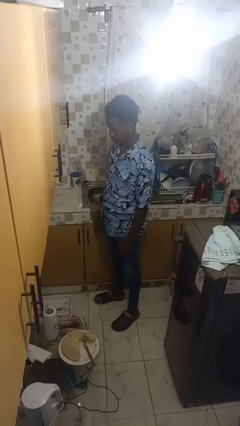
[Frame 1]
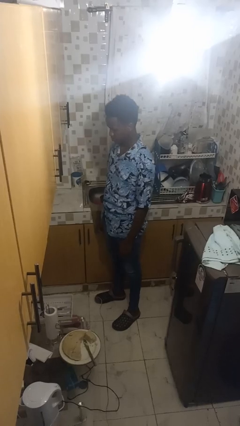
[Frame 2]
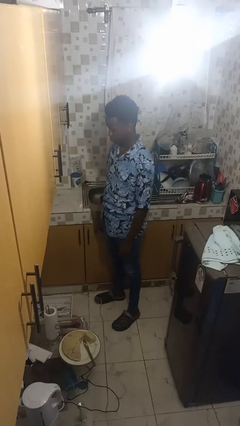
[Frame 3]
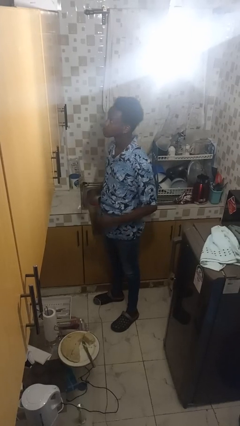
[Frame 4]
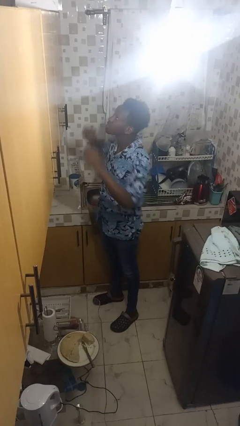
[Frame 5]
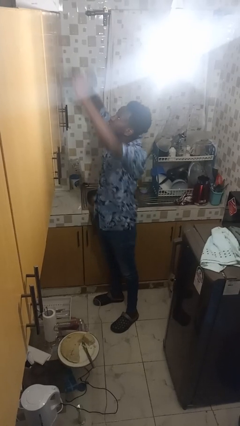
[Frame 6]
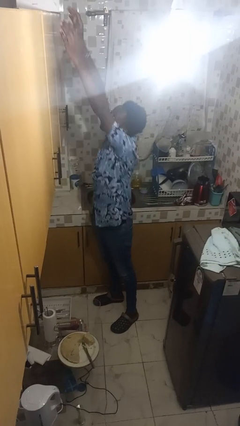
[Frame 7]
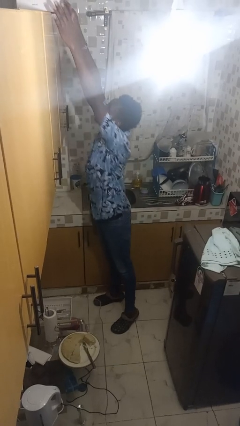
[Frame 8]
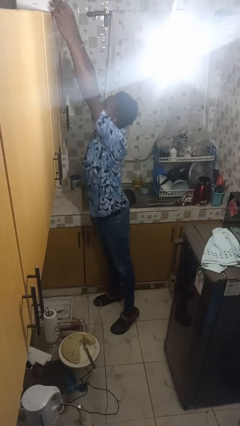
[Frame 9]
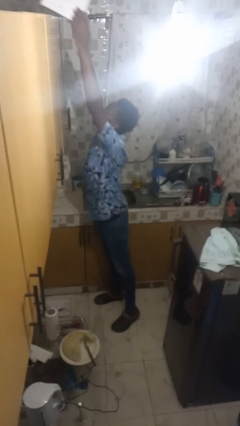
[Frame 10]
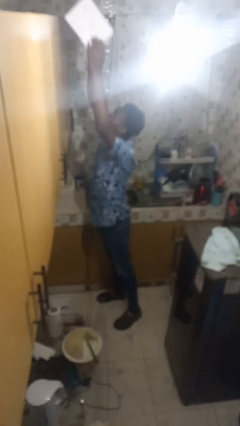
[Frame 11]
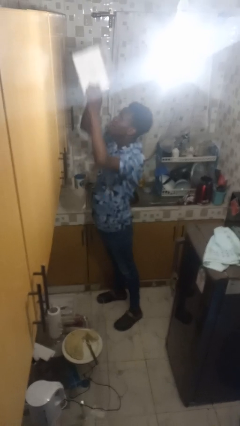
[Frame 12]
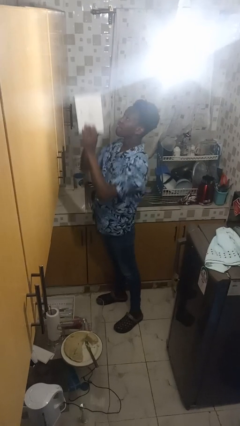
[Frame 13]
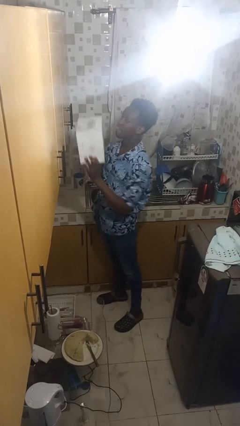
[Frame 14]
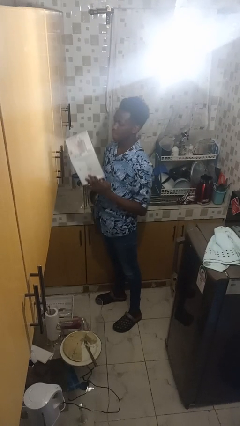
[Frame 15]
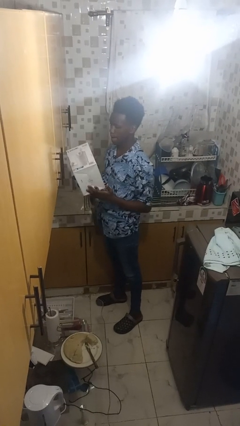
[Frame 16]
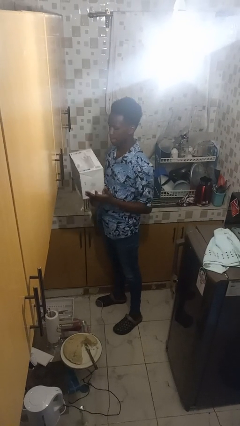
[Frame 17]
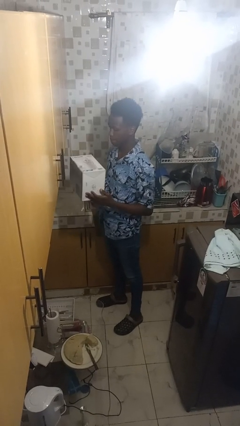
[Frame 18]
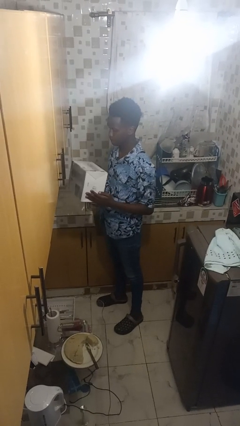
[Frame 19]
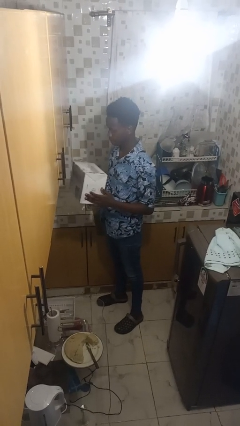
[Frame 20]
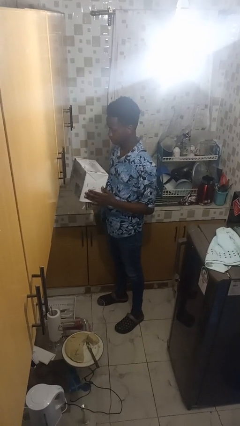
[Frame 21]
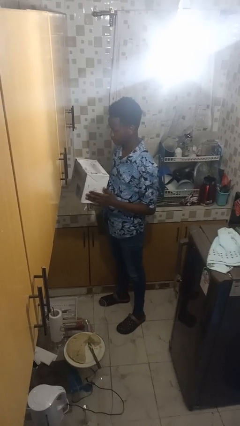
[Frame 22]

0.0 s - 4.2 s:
person picks up object from shelf

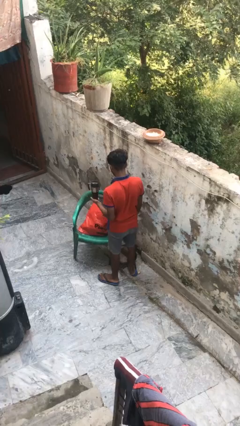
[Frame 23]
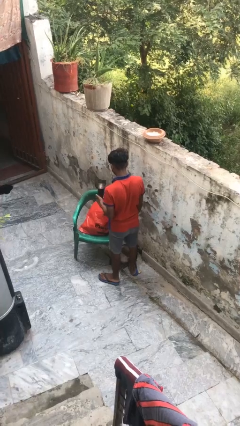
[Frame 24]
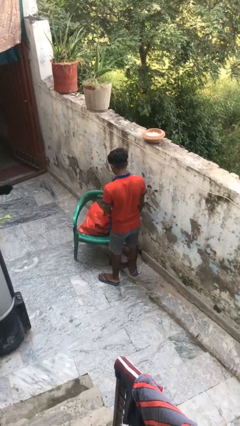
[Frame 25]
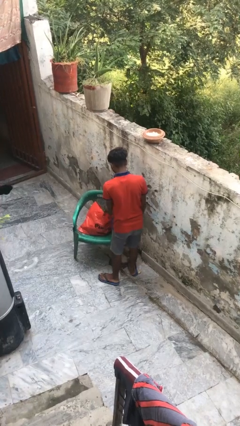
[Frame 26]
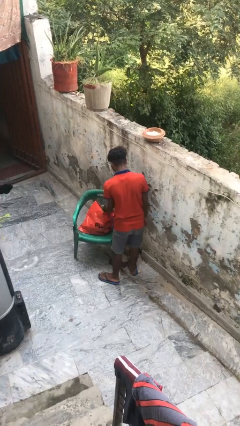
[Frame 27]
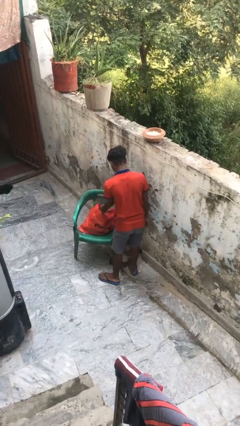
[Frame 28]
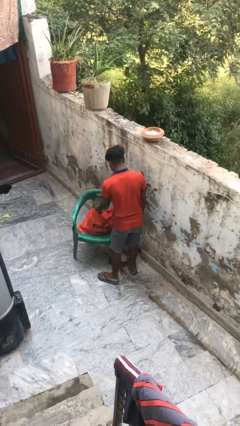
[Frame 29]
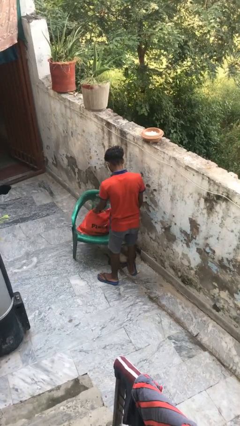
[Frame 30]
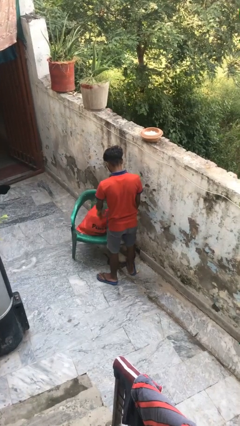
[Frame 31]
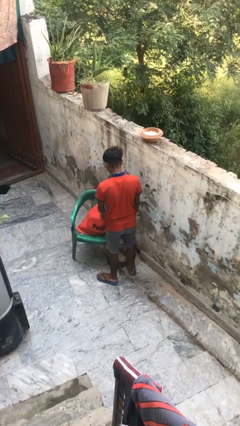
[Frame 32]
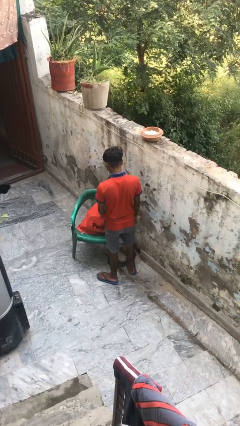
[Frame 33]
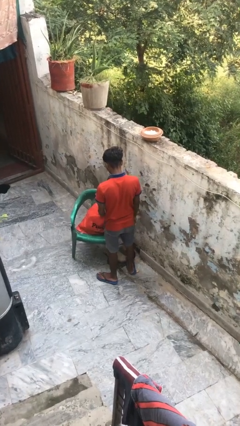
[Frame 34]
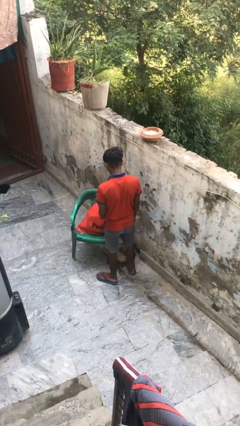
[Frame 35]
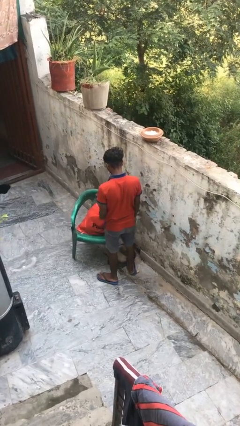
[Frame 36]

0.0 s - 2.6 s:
person puts object into bag

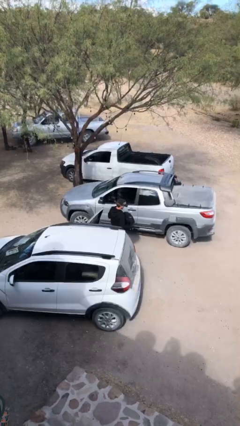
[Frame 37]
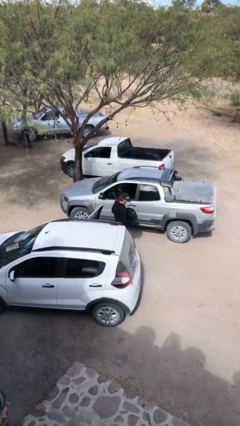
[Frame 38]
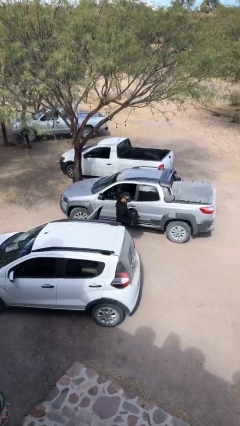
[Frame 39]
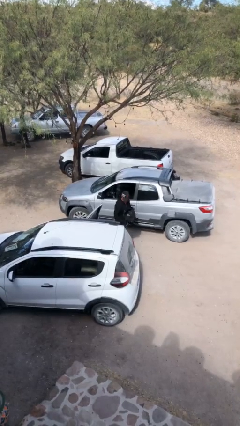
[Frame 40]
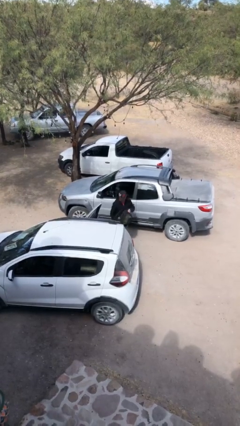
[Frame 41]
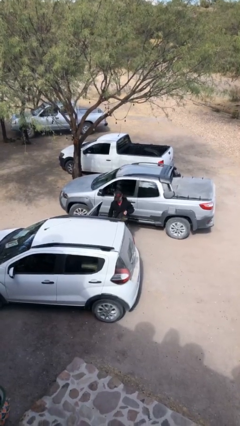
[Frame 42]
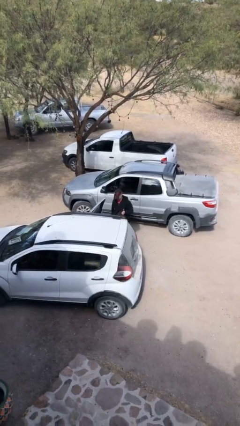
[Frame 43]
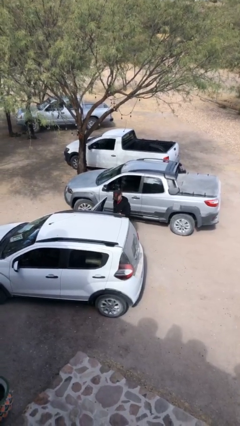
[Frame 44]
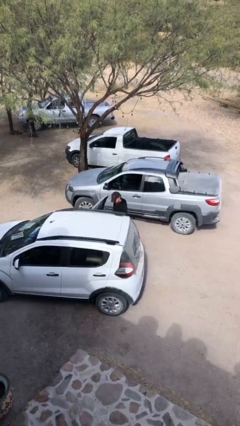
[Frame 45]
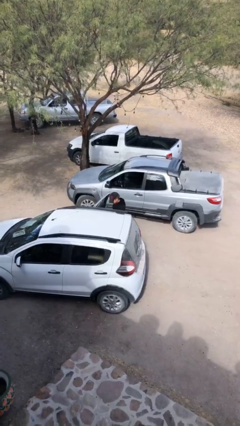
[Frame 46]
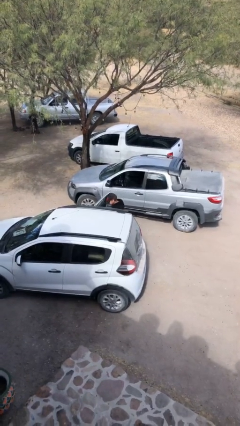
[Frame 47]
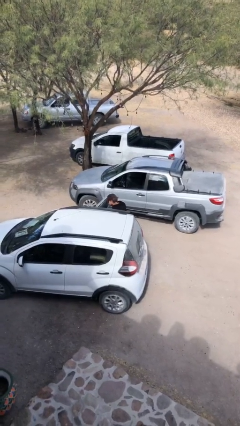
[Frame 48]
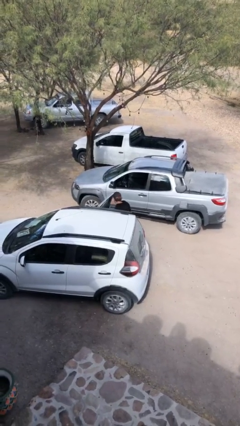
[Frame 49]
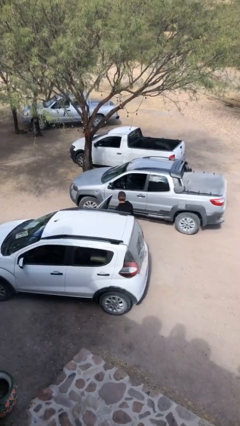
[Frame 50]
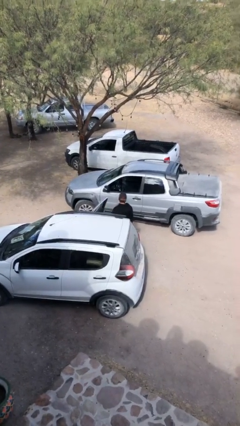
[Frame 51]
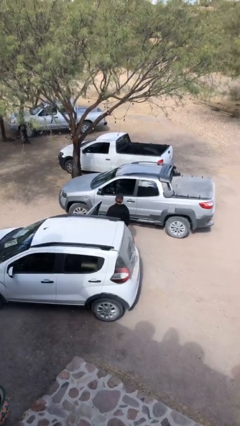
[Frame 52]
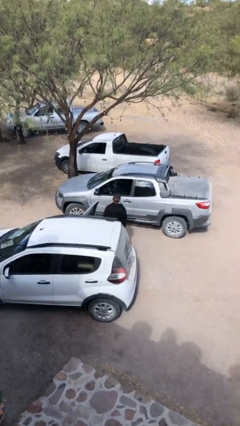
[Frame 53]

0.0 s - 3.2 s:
person loads car

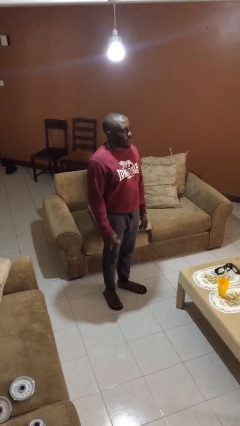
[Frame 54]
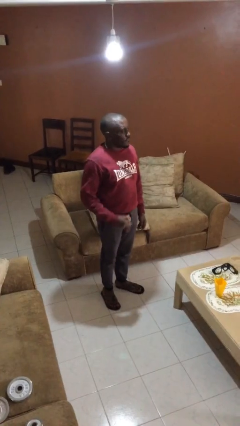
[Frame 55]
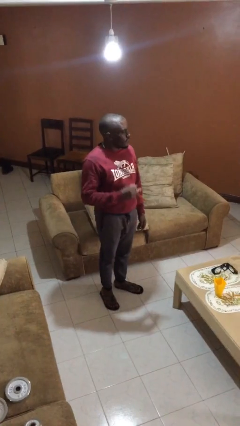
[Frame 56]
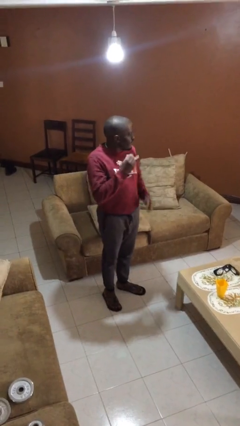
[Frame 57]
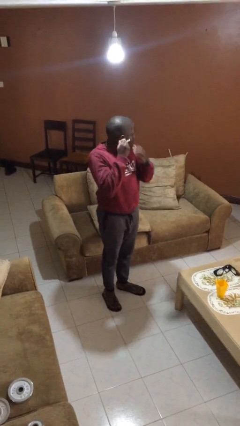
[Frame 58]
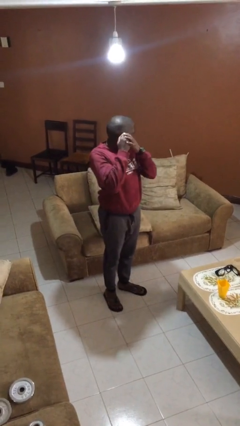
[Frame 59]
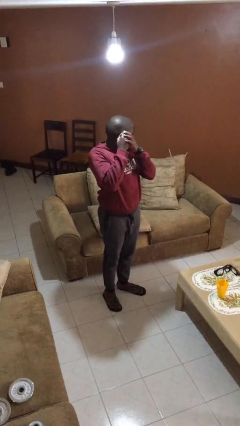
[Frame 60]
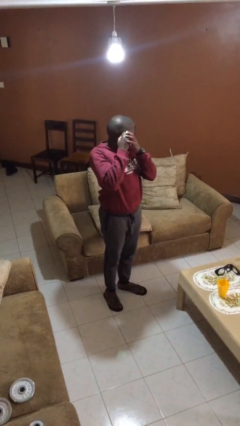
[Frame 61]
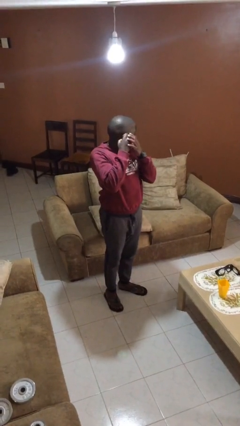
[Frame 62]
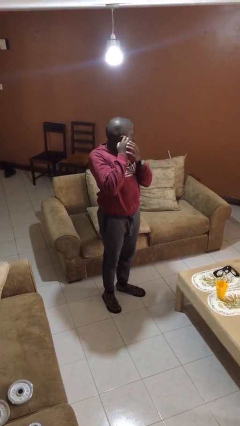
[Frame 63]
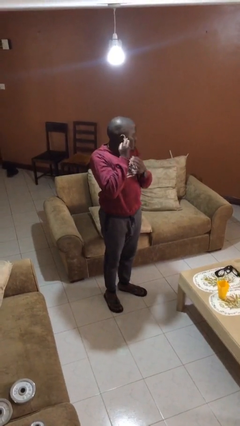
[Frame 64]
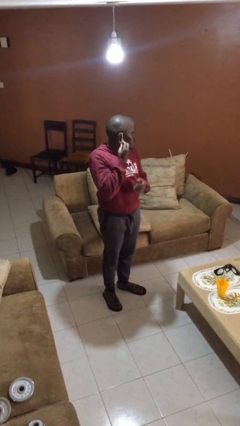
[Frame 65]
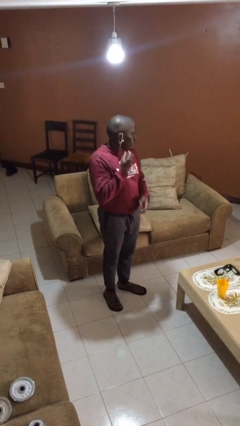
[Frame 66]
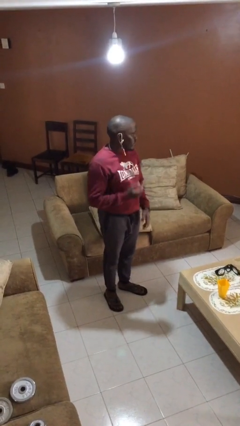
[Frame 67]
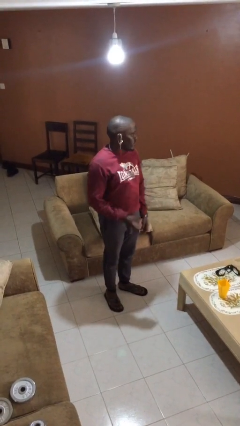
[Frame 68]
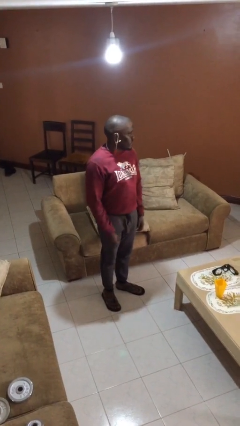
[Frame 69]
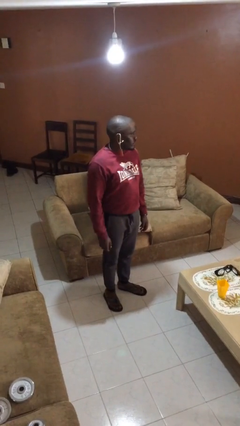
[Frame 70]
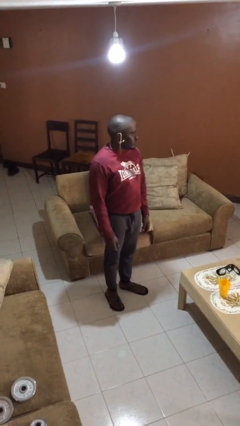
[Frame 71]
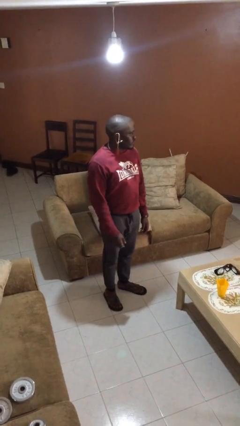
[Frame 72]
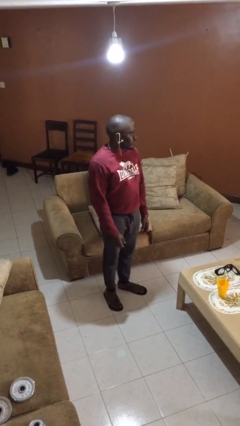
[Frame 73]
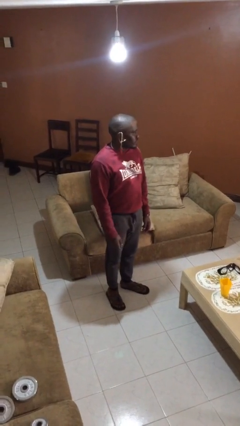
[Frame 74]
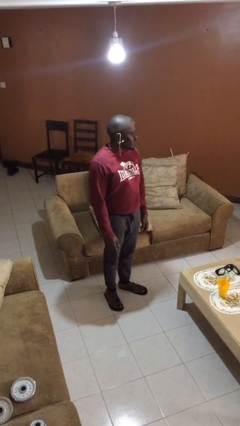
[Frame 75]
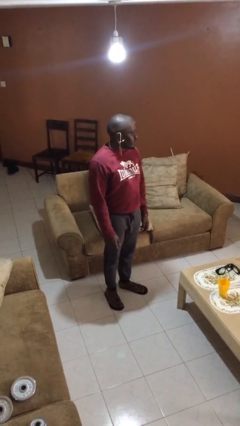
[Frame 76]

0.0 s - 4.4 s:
person puts on earrings

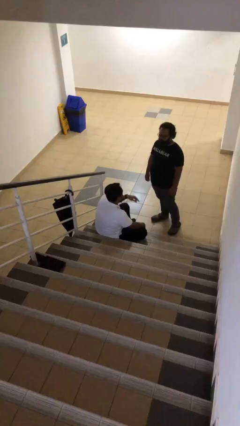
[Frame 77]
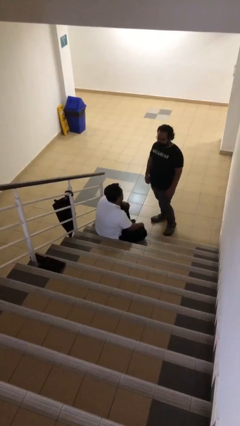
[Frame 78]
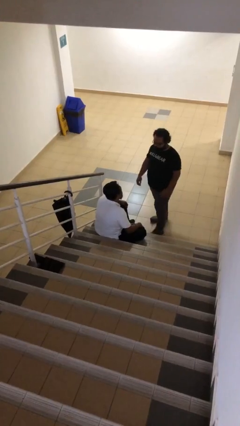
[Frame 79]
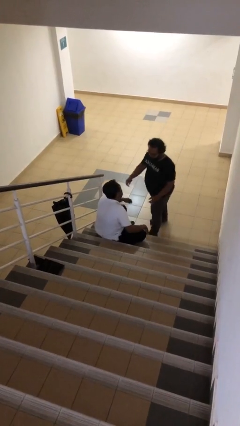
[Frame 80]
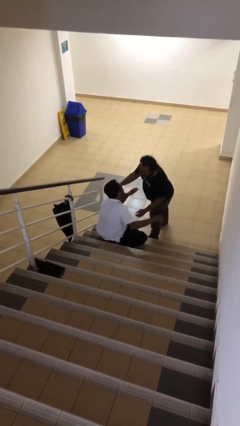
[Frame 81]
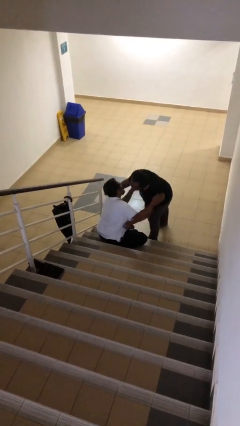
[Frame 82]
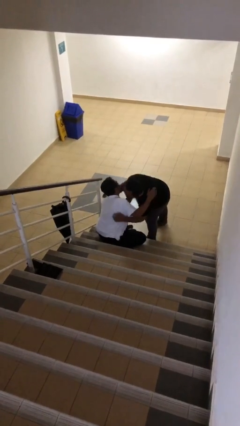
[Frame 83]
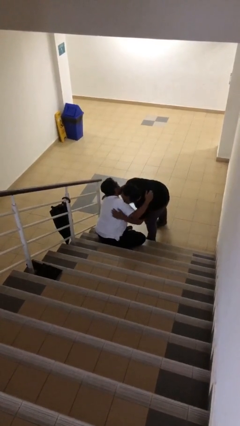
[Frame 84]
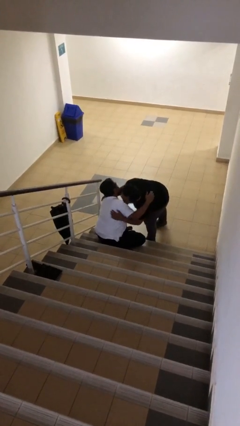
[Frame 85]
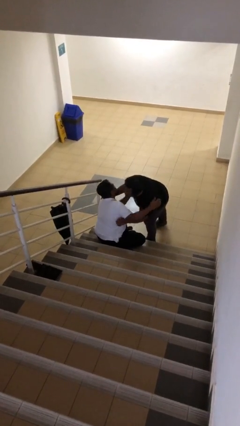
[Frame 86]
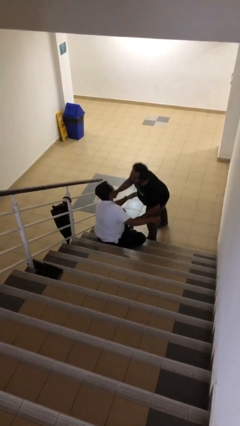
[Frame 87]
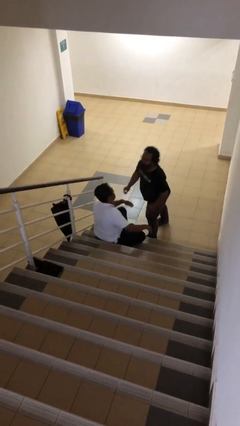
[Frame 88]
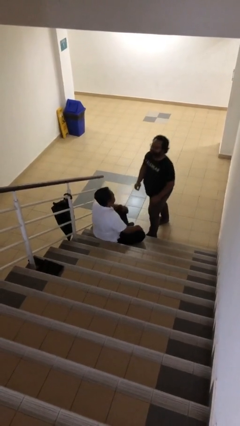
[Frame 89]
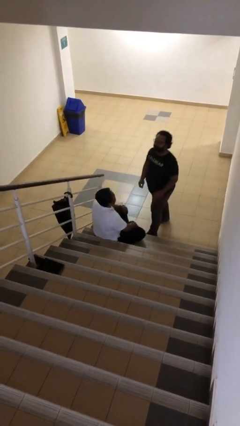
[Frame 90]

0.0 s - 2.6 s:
person embraces person

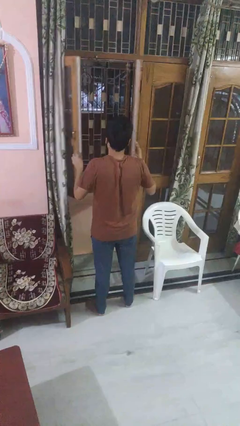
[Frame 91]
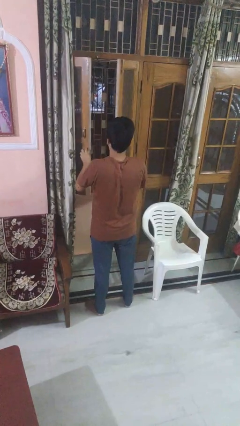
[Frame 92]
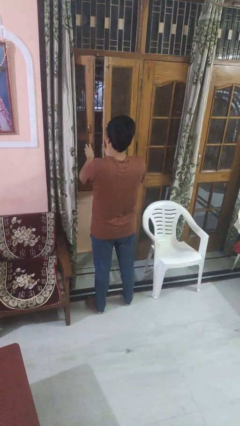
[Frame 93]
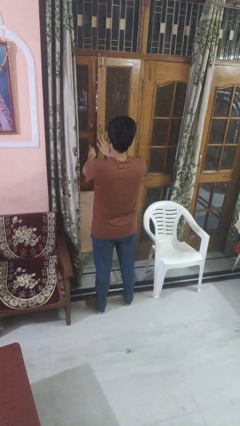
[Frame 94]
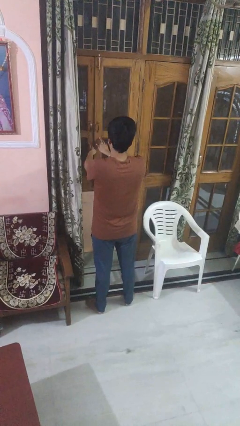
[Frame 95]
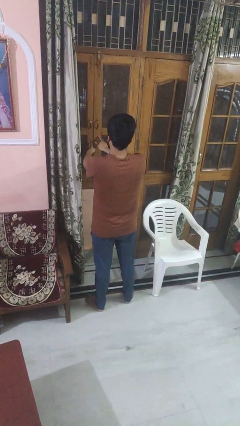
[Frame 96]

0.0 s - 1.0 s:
person closes home window
